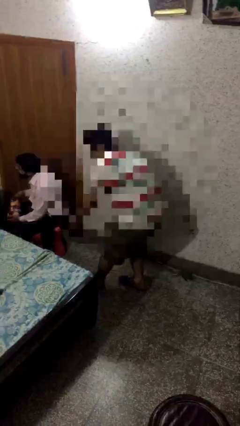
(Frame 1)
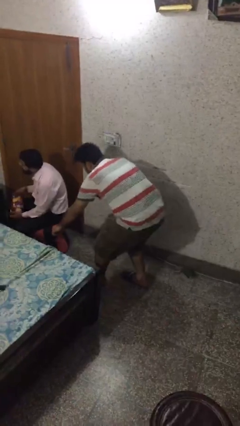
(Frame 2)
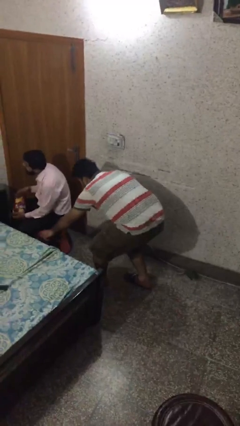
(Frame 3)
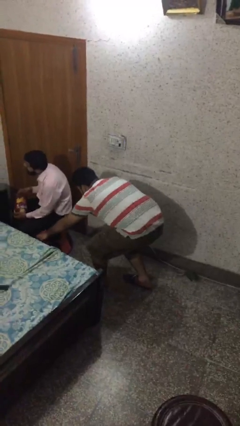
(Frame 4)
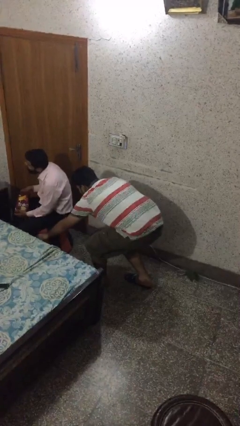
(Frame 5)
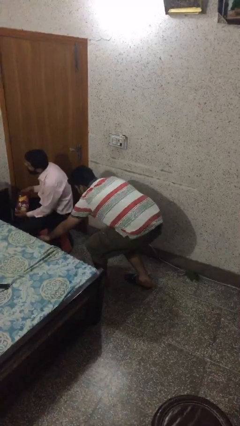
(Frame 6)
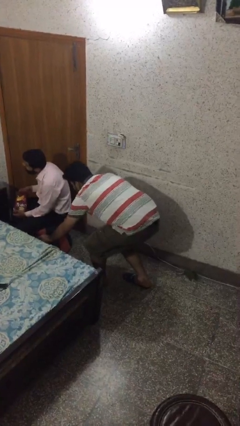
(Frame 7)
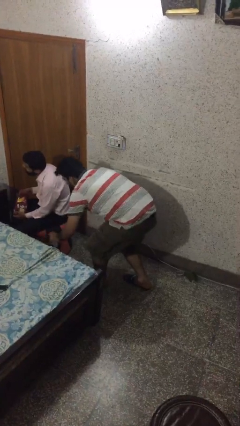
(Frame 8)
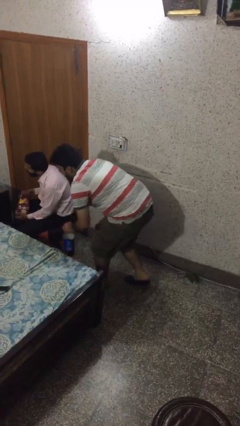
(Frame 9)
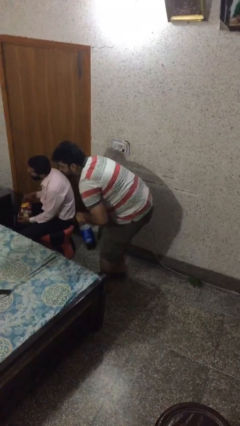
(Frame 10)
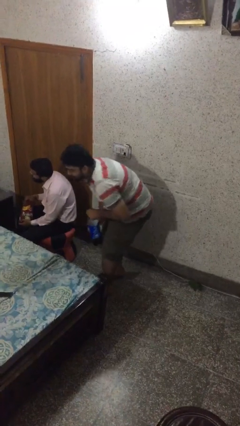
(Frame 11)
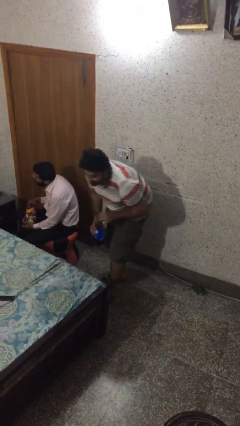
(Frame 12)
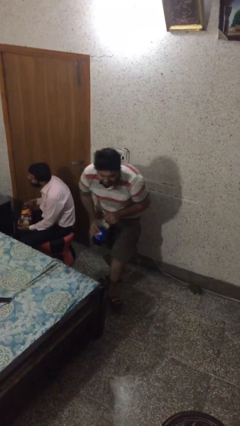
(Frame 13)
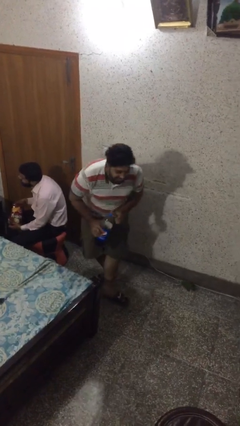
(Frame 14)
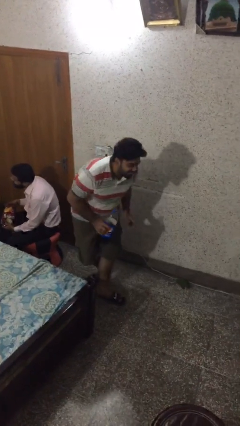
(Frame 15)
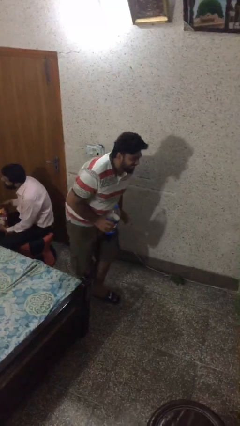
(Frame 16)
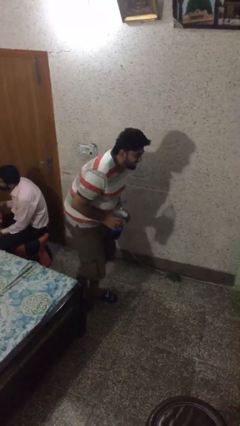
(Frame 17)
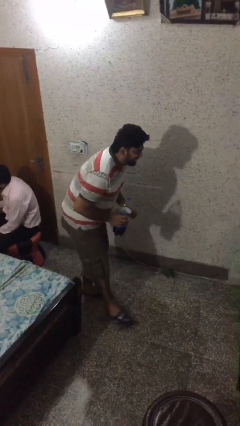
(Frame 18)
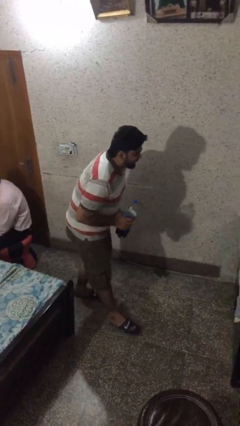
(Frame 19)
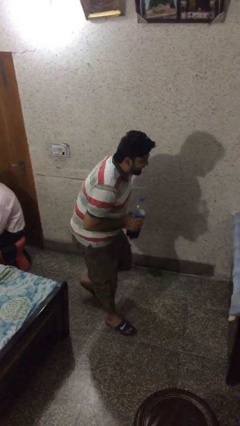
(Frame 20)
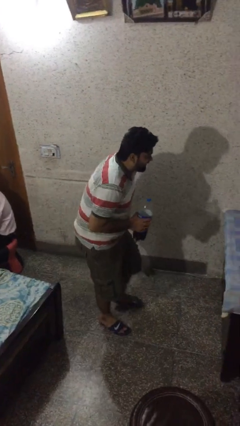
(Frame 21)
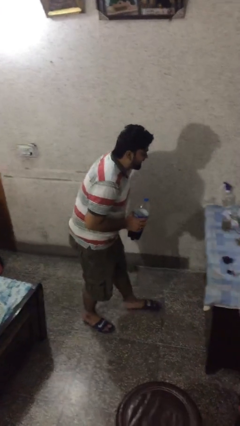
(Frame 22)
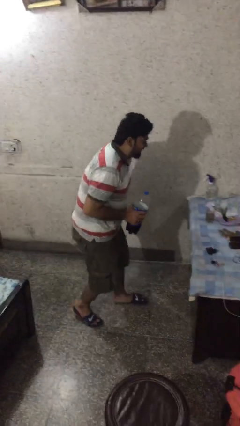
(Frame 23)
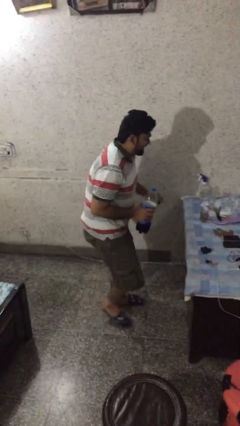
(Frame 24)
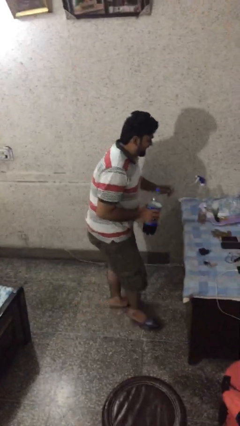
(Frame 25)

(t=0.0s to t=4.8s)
person steals object from person

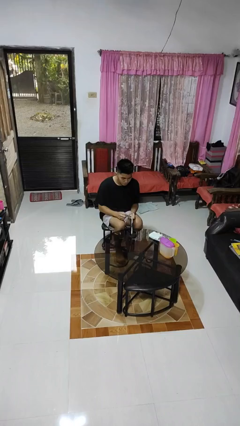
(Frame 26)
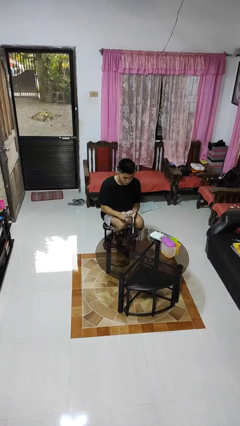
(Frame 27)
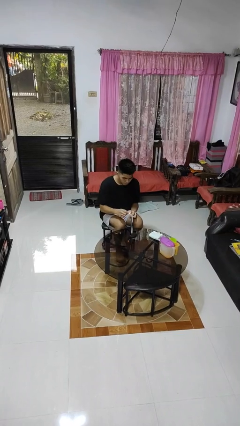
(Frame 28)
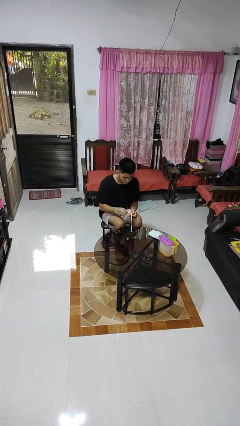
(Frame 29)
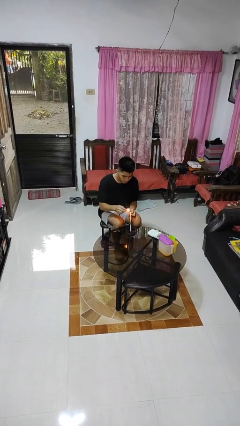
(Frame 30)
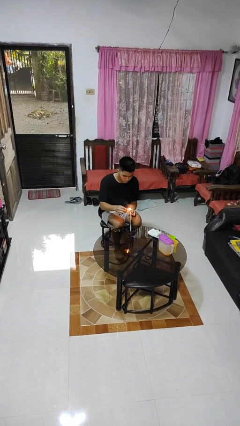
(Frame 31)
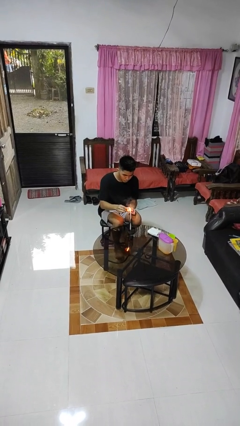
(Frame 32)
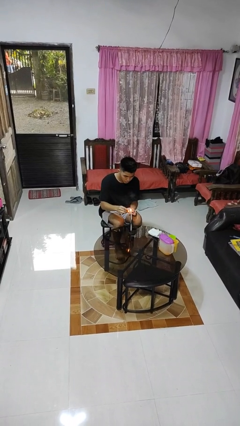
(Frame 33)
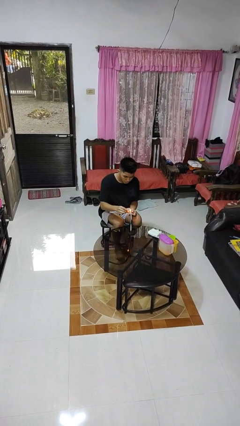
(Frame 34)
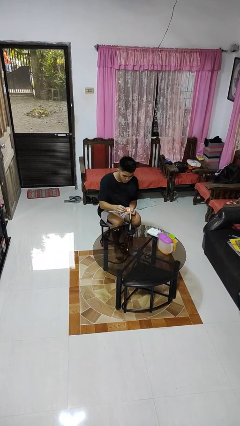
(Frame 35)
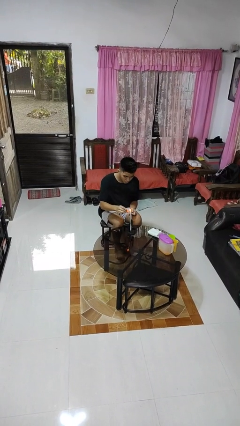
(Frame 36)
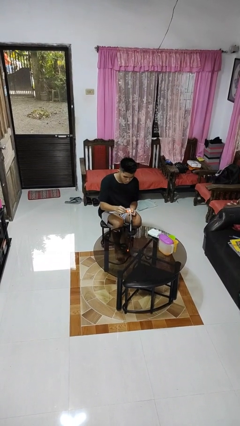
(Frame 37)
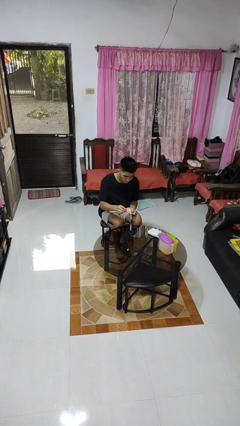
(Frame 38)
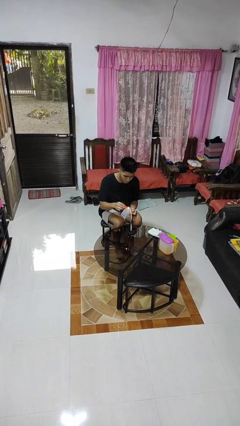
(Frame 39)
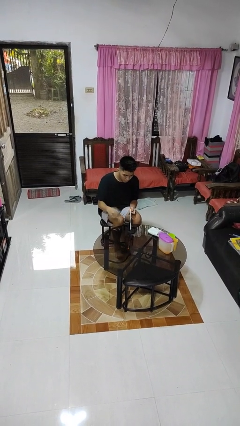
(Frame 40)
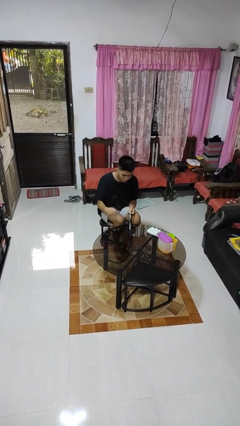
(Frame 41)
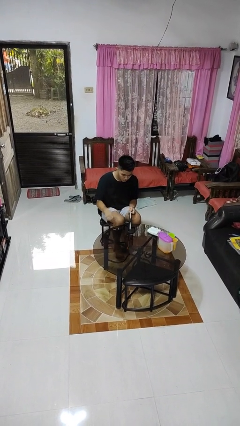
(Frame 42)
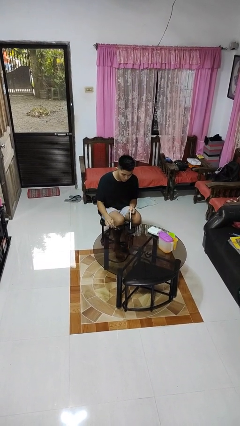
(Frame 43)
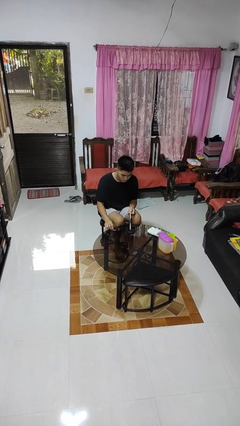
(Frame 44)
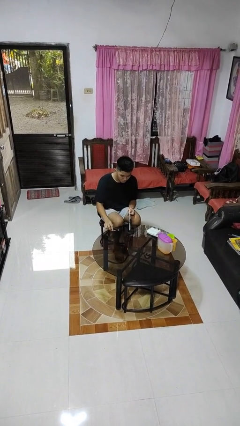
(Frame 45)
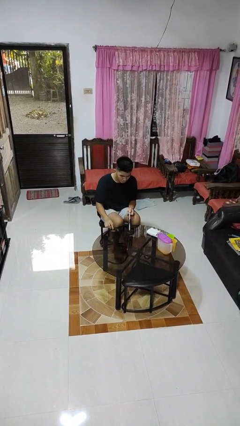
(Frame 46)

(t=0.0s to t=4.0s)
person lights candle

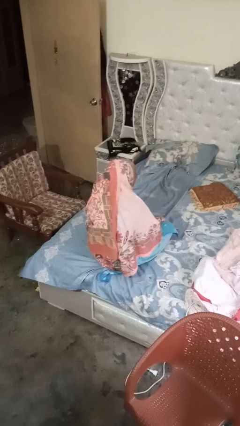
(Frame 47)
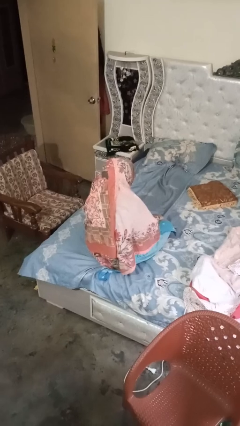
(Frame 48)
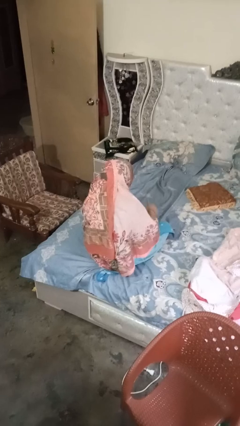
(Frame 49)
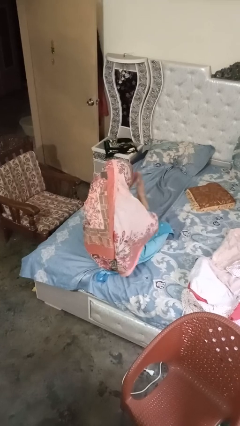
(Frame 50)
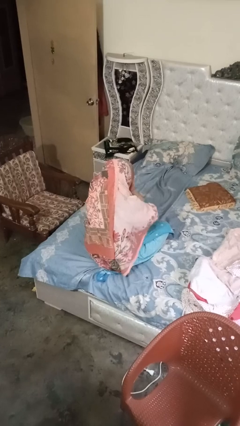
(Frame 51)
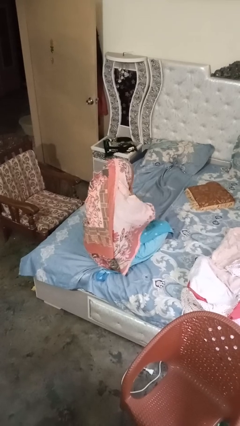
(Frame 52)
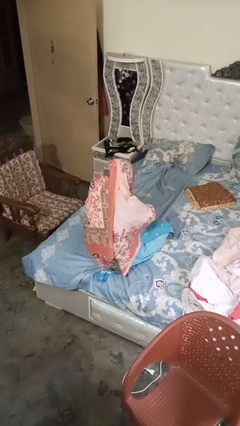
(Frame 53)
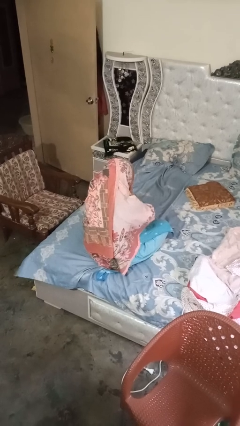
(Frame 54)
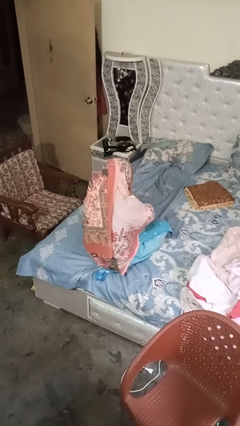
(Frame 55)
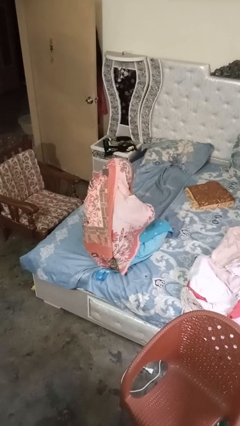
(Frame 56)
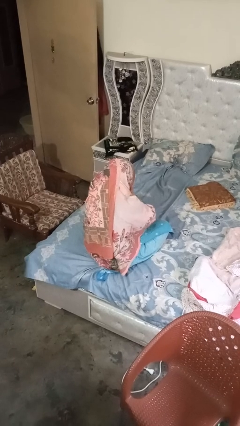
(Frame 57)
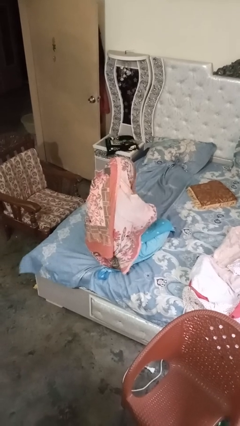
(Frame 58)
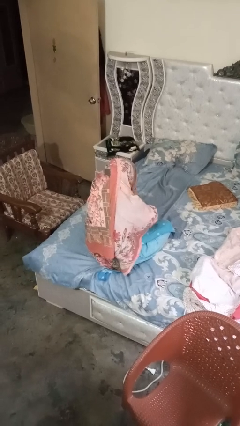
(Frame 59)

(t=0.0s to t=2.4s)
person covers face with hands

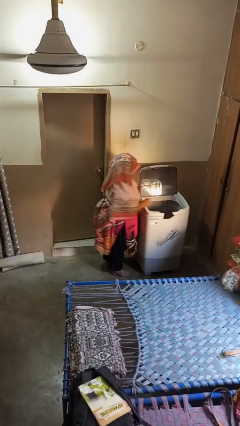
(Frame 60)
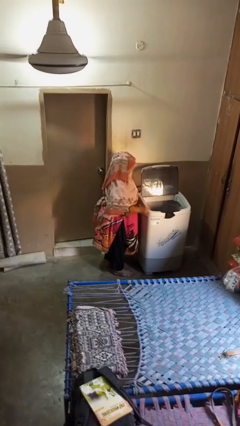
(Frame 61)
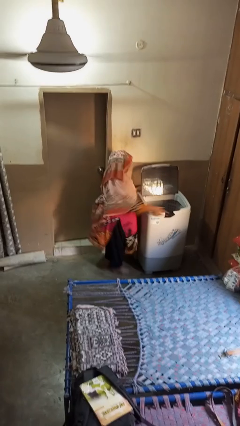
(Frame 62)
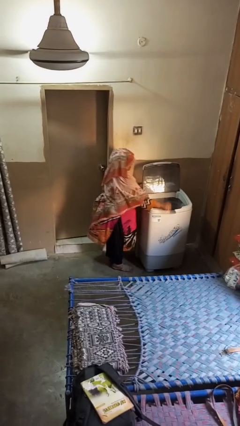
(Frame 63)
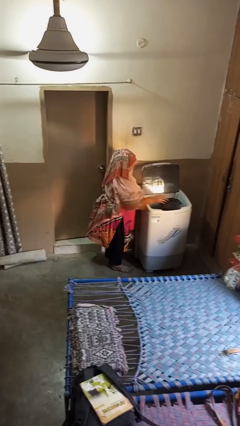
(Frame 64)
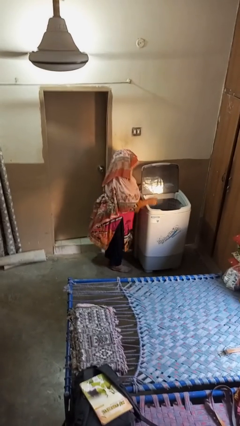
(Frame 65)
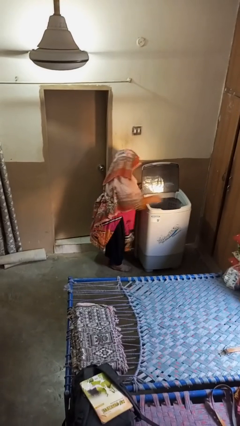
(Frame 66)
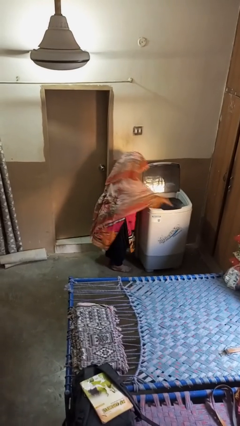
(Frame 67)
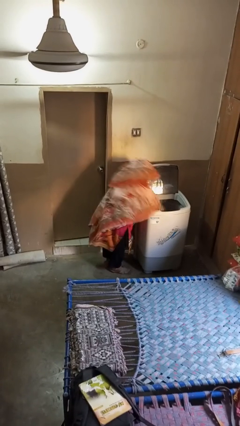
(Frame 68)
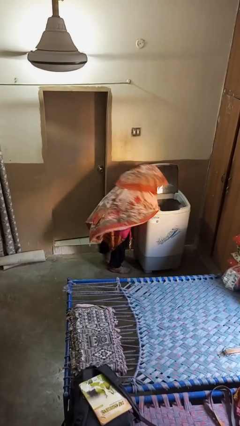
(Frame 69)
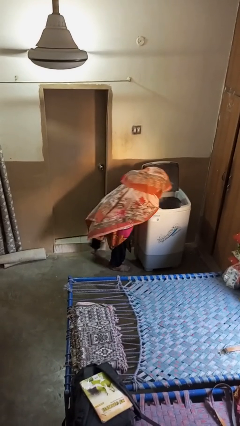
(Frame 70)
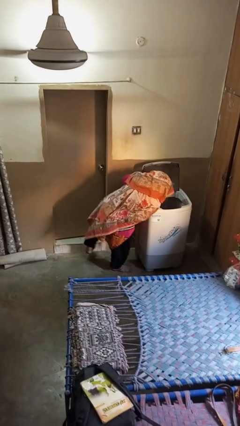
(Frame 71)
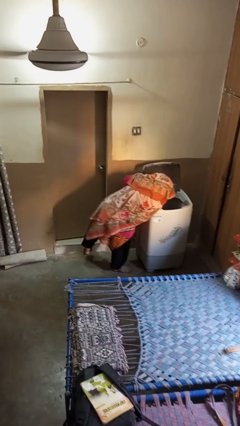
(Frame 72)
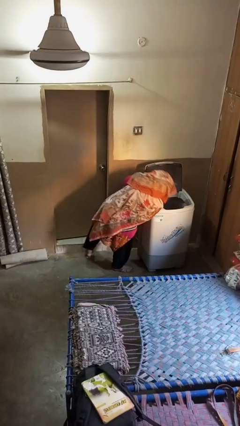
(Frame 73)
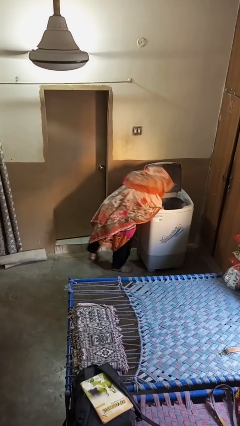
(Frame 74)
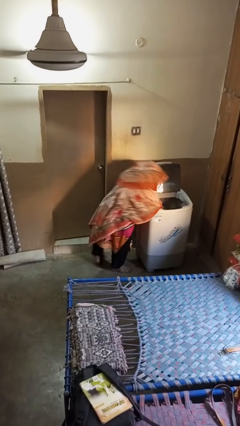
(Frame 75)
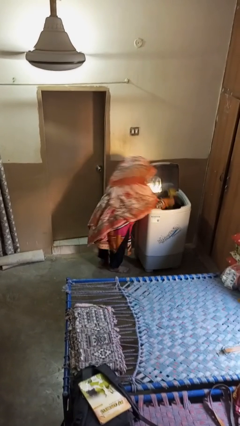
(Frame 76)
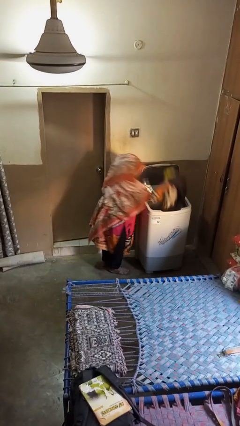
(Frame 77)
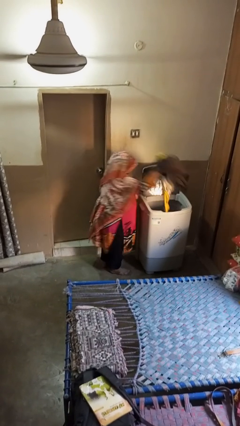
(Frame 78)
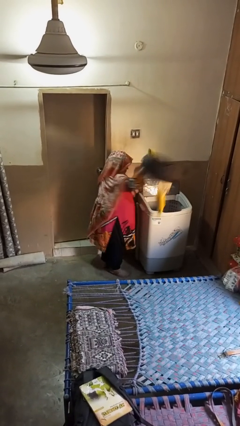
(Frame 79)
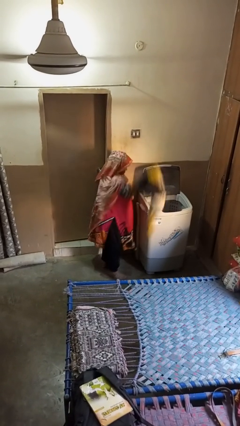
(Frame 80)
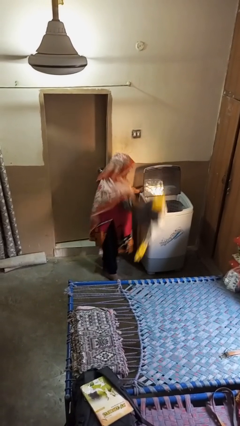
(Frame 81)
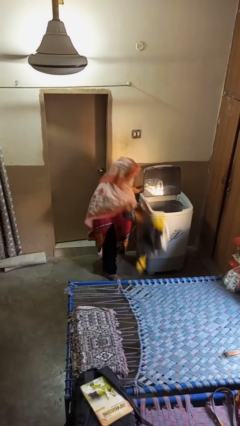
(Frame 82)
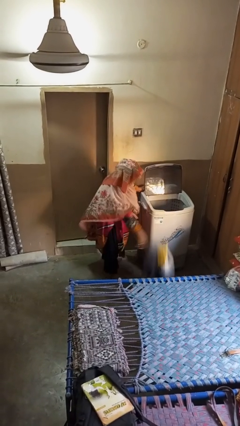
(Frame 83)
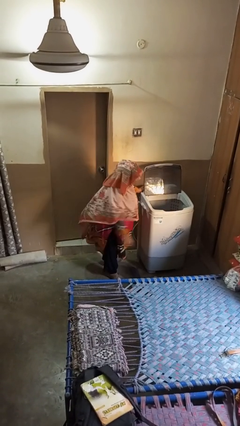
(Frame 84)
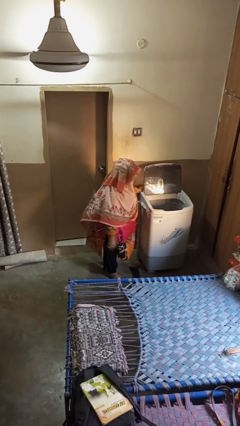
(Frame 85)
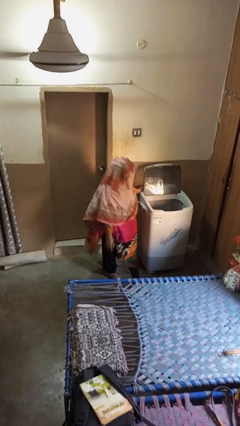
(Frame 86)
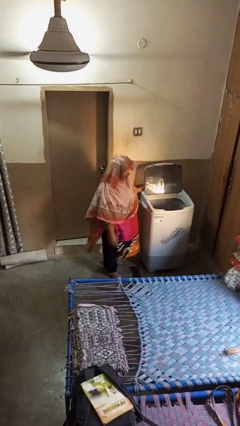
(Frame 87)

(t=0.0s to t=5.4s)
person unloads clotheswasher

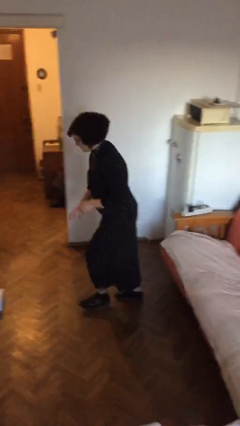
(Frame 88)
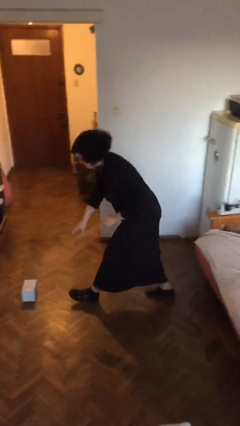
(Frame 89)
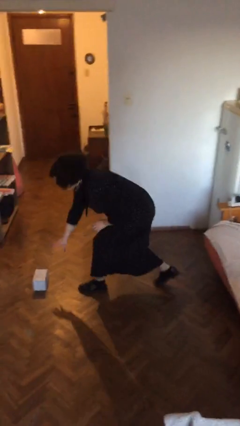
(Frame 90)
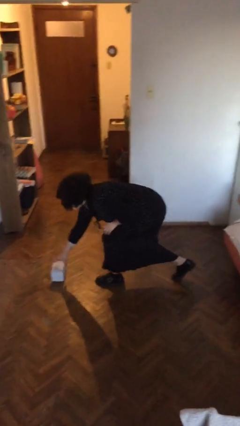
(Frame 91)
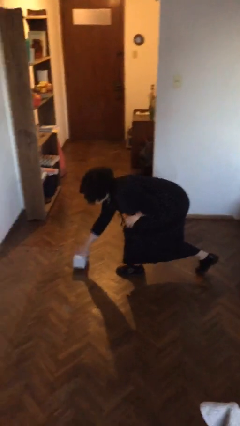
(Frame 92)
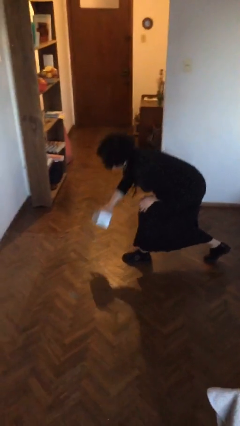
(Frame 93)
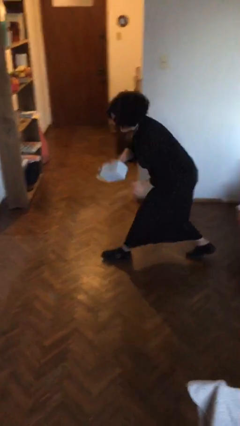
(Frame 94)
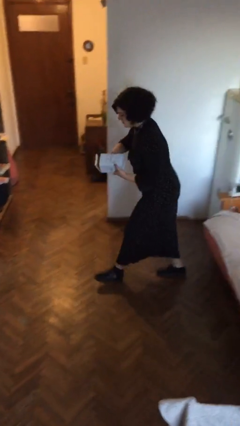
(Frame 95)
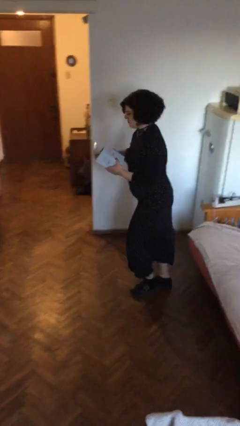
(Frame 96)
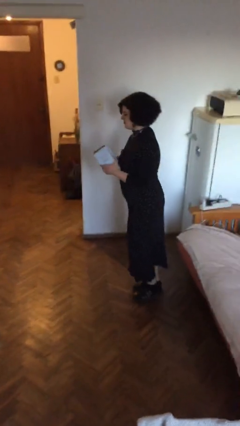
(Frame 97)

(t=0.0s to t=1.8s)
person picks up object from floor
